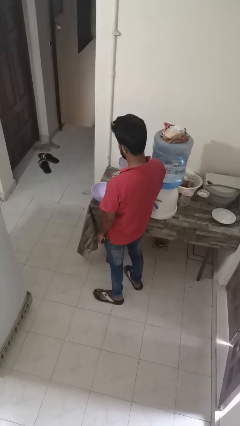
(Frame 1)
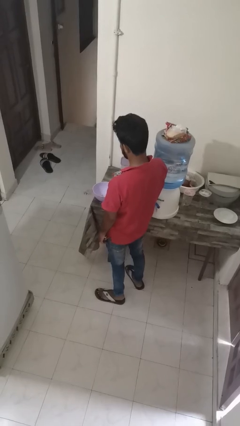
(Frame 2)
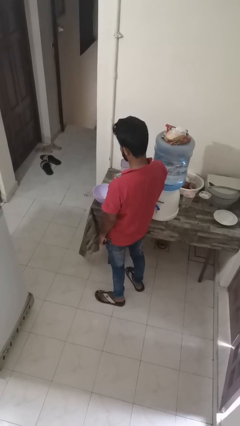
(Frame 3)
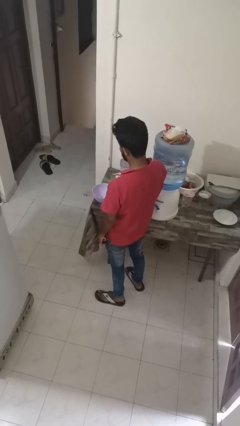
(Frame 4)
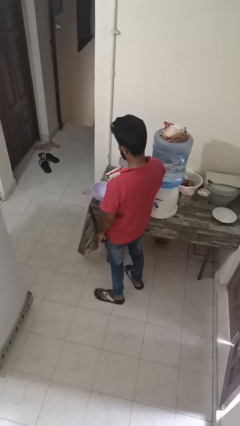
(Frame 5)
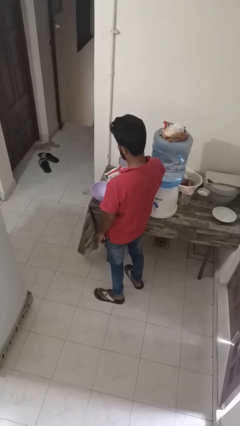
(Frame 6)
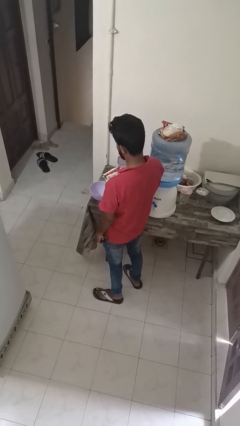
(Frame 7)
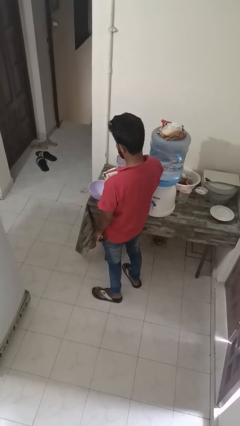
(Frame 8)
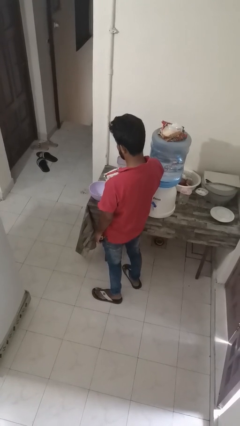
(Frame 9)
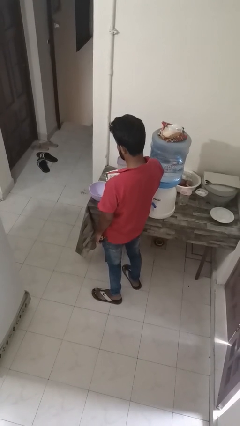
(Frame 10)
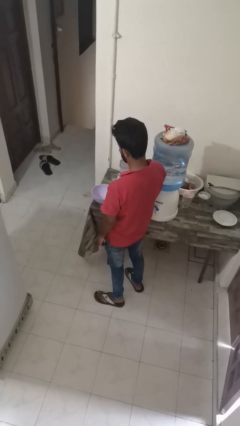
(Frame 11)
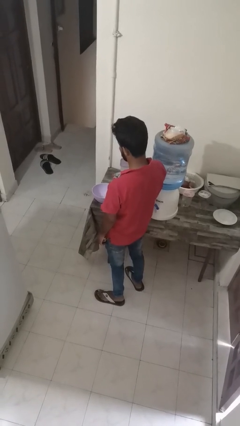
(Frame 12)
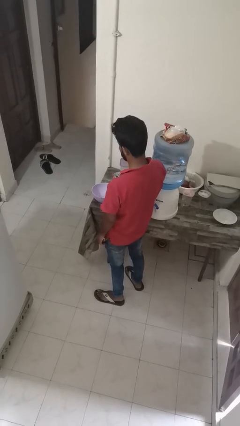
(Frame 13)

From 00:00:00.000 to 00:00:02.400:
person pours into bowl

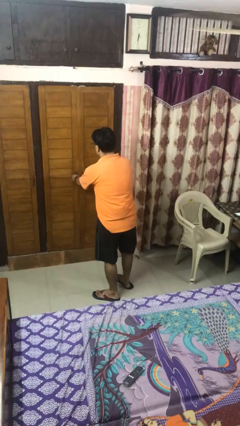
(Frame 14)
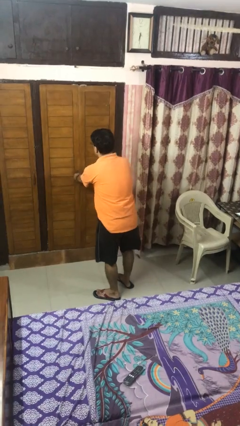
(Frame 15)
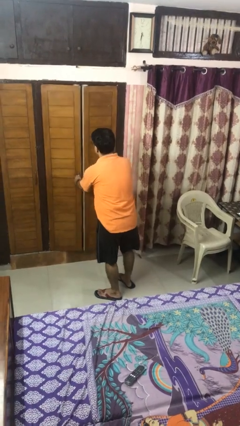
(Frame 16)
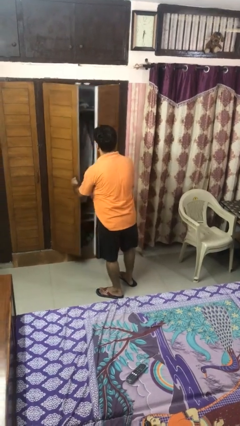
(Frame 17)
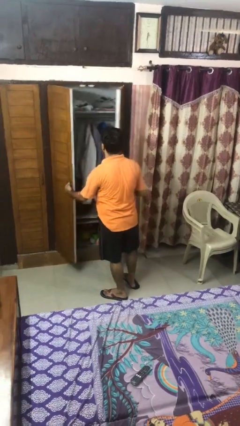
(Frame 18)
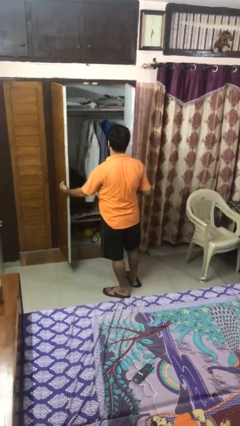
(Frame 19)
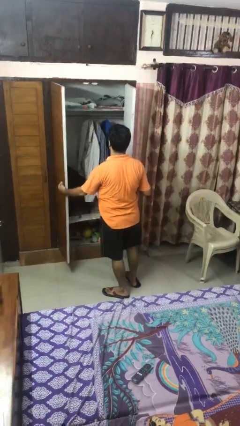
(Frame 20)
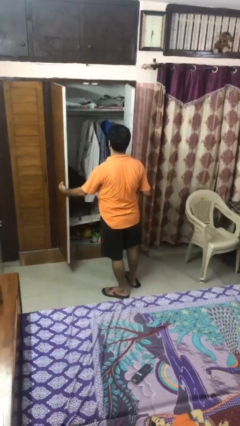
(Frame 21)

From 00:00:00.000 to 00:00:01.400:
person opens closet door

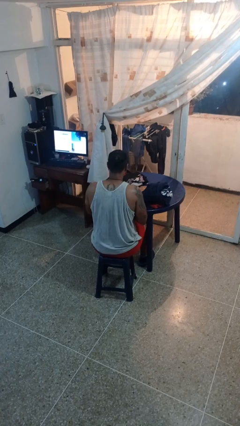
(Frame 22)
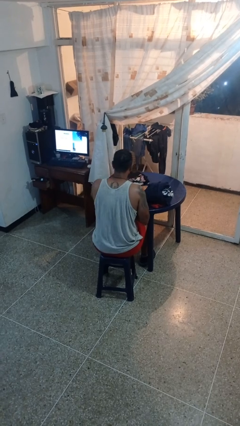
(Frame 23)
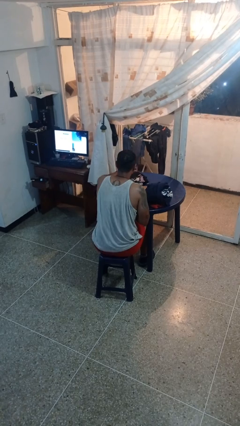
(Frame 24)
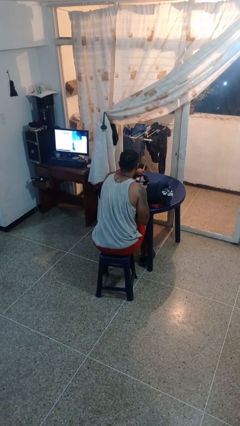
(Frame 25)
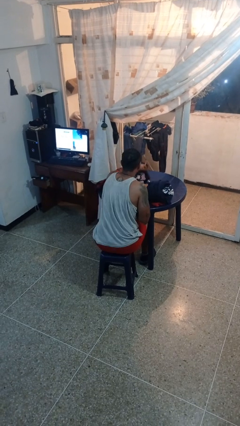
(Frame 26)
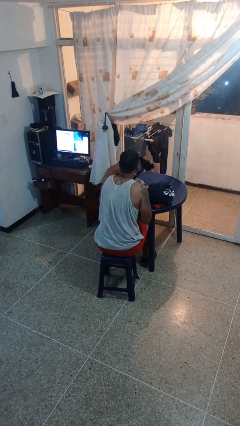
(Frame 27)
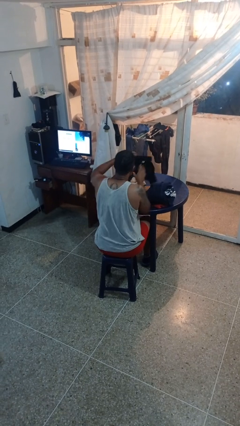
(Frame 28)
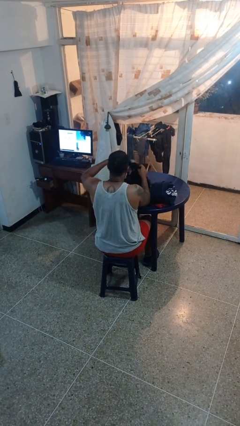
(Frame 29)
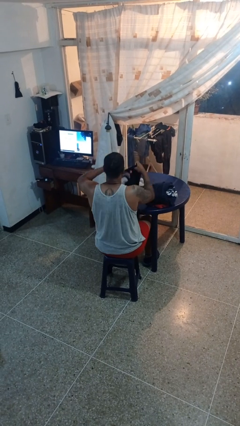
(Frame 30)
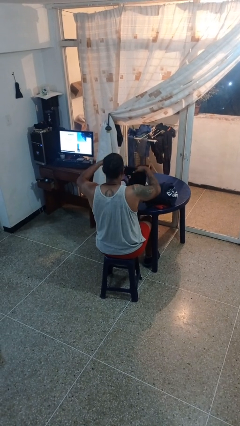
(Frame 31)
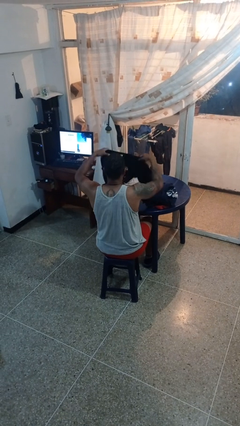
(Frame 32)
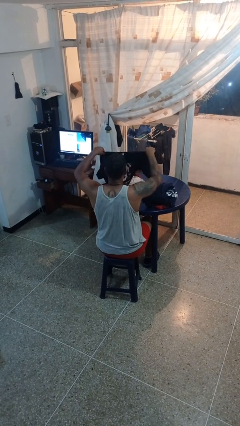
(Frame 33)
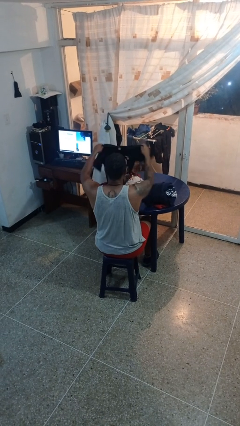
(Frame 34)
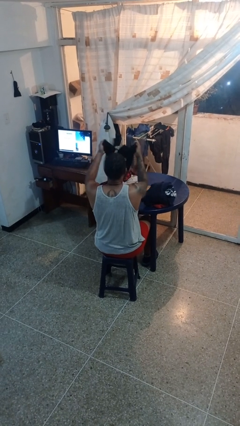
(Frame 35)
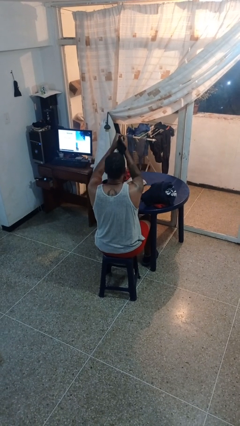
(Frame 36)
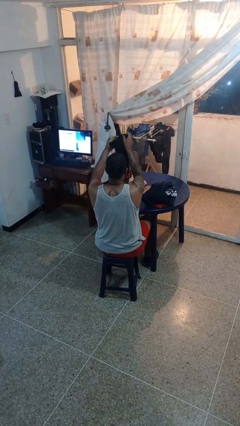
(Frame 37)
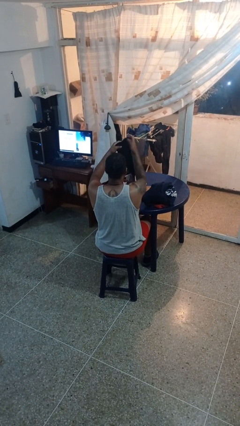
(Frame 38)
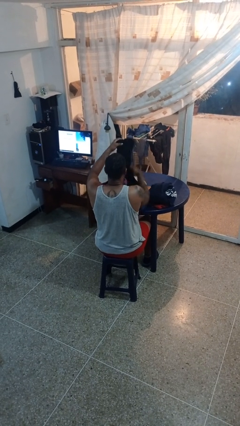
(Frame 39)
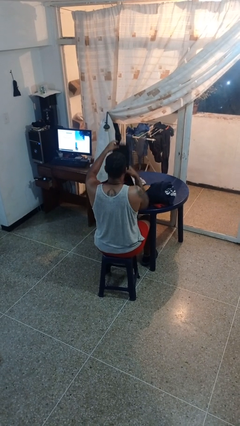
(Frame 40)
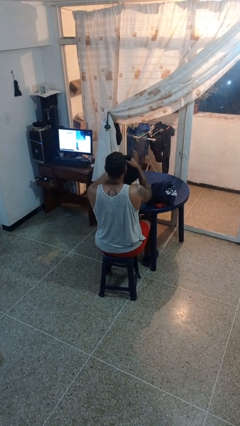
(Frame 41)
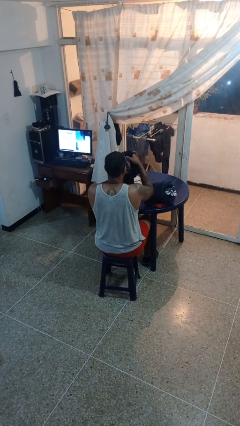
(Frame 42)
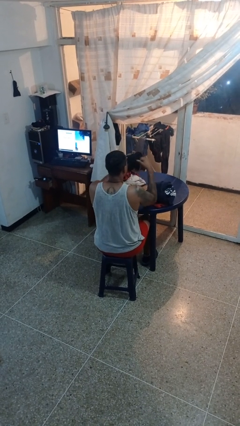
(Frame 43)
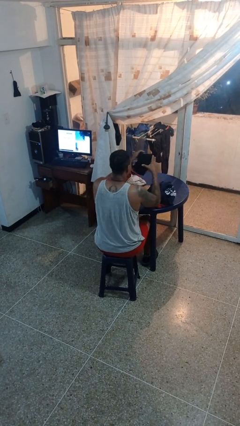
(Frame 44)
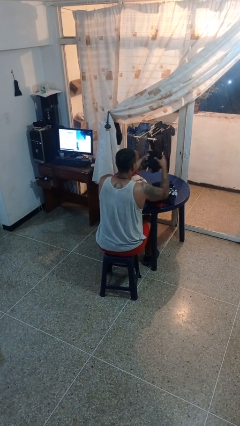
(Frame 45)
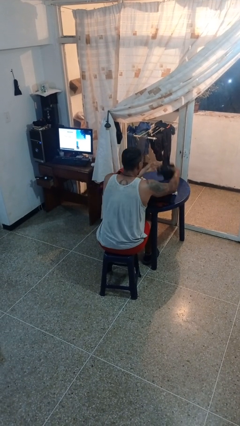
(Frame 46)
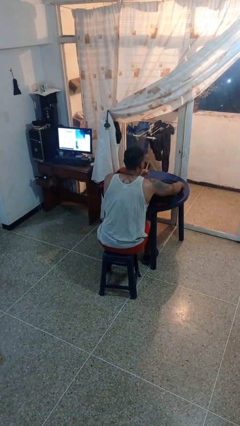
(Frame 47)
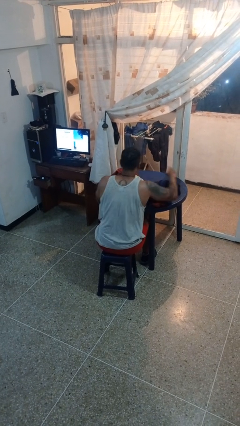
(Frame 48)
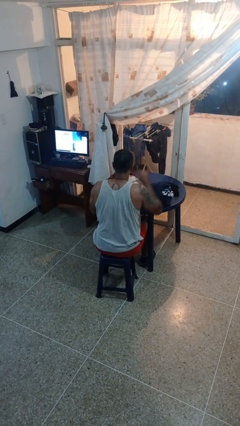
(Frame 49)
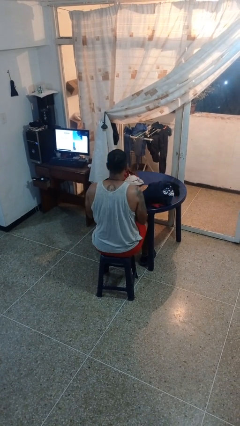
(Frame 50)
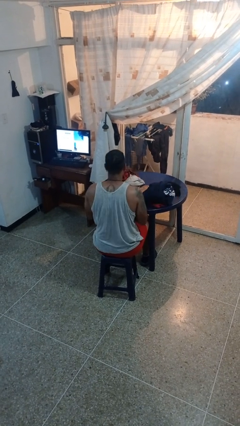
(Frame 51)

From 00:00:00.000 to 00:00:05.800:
person folds shirt

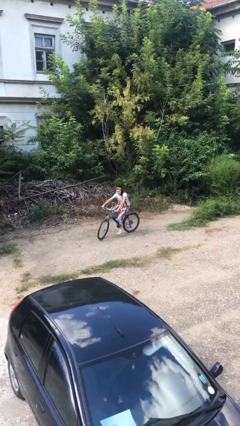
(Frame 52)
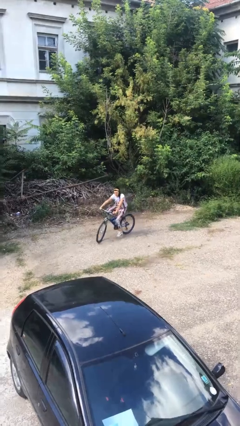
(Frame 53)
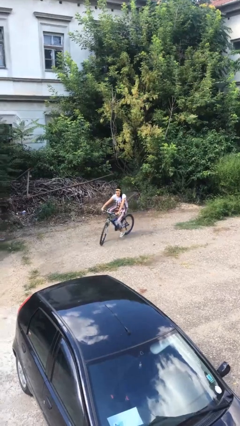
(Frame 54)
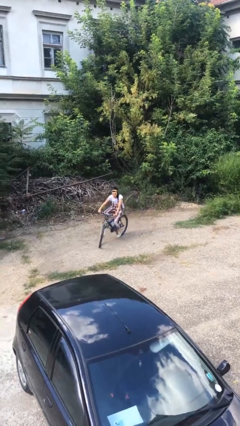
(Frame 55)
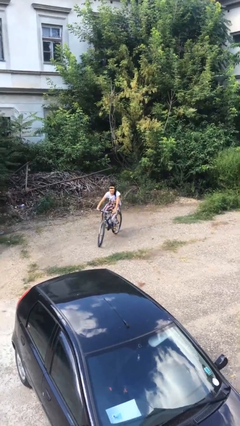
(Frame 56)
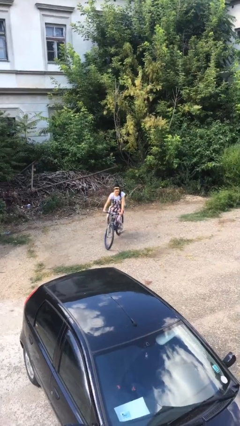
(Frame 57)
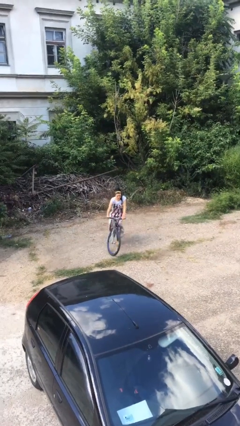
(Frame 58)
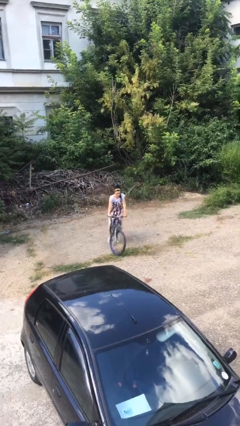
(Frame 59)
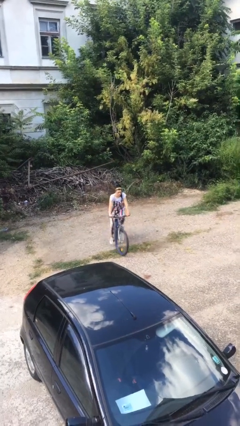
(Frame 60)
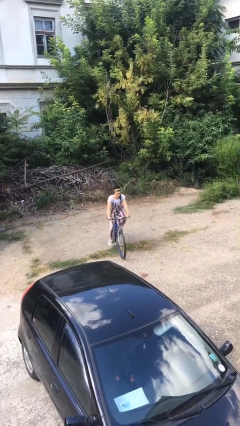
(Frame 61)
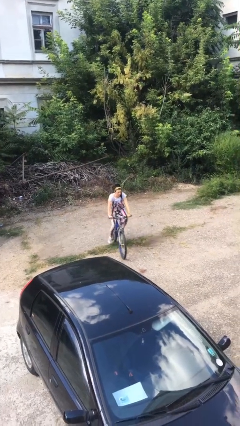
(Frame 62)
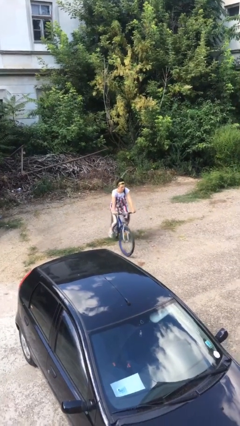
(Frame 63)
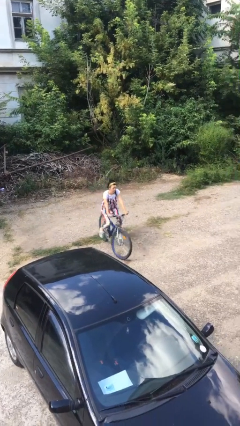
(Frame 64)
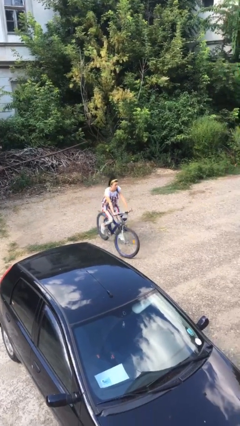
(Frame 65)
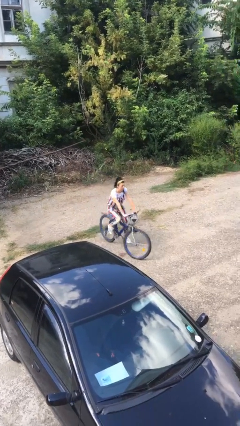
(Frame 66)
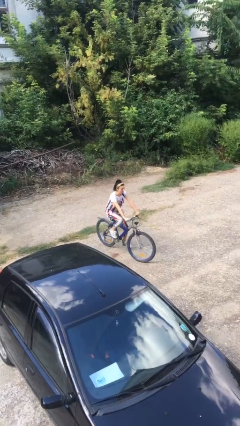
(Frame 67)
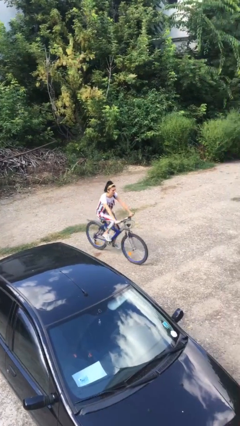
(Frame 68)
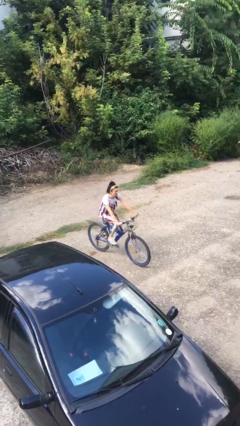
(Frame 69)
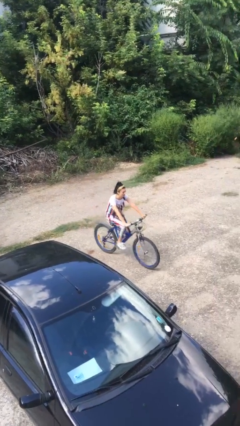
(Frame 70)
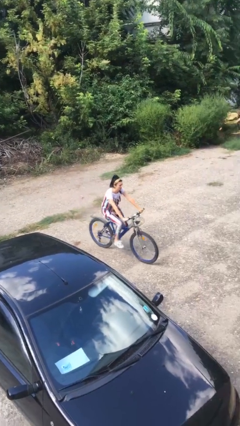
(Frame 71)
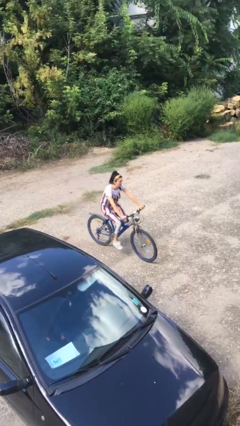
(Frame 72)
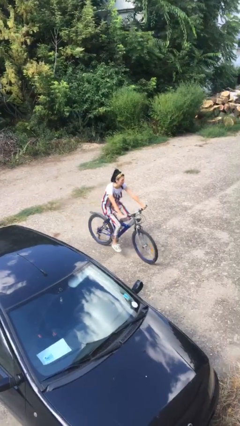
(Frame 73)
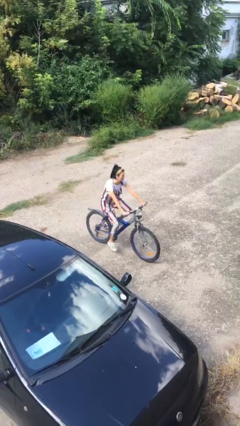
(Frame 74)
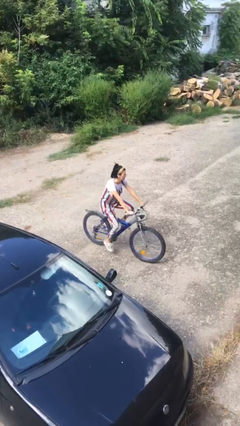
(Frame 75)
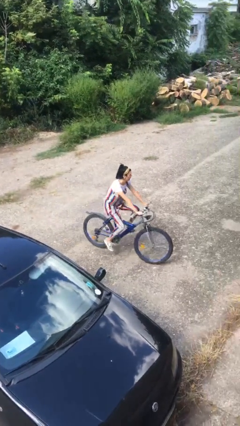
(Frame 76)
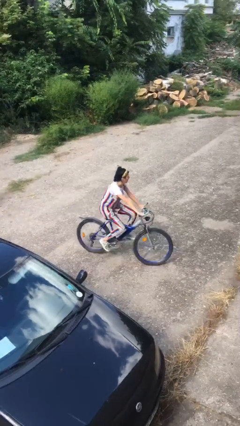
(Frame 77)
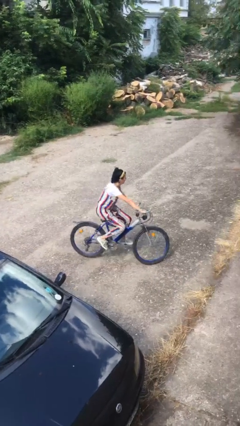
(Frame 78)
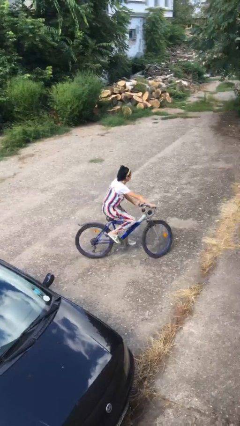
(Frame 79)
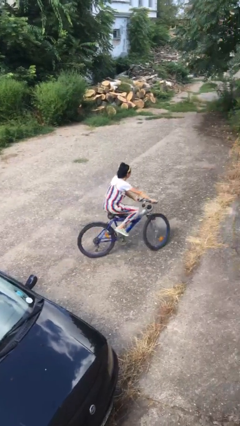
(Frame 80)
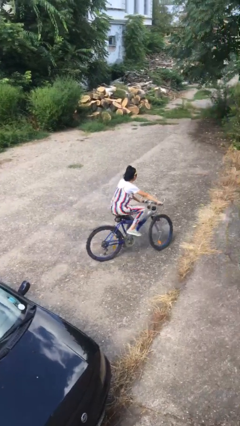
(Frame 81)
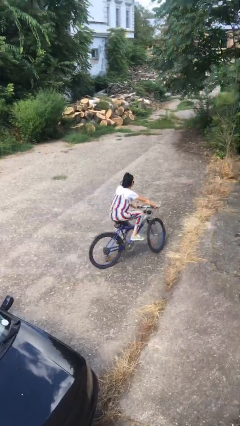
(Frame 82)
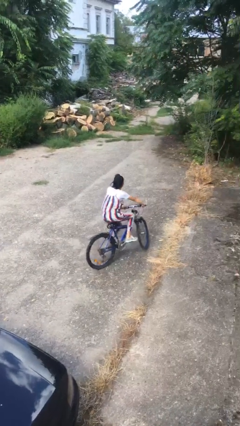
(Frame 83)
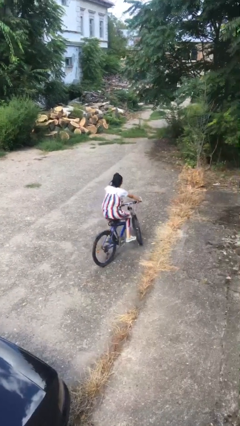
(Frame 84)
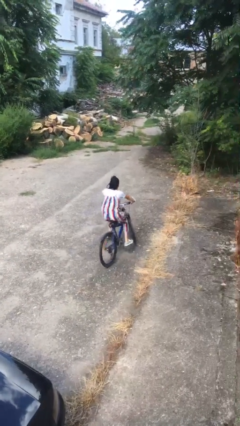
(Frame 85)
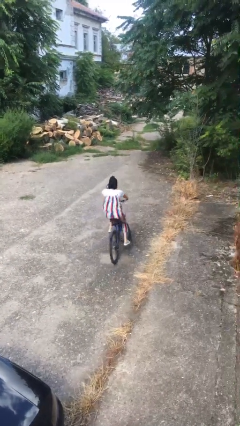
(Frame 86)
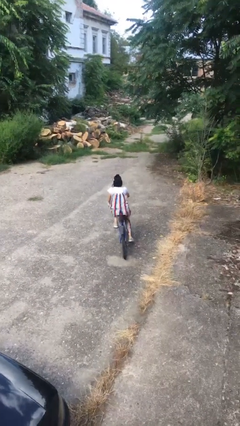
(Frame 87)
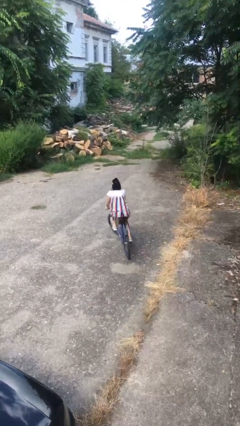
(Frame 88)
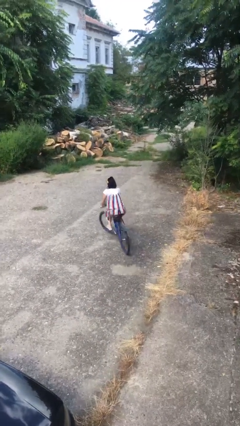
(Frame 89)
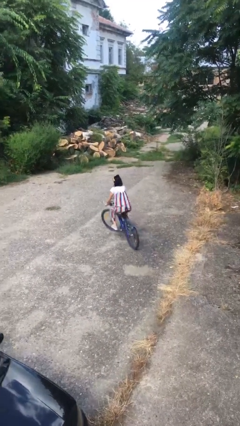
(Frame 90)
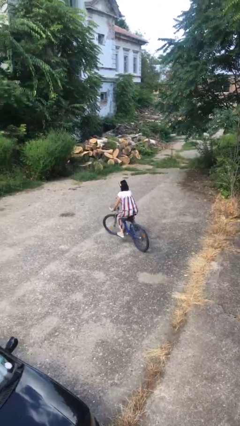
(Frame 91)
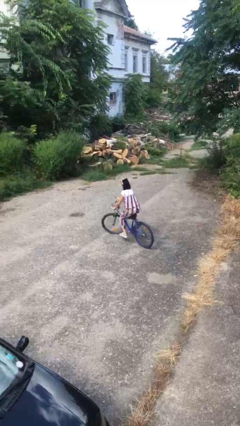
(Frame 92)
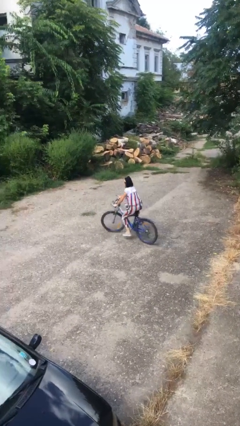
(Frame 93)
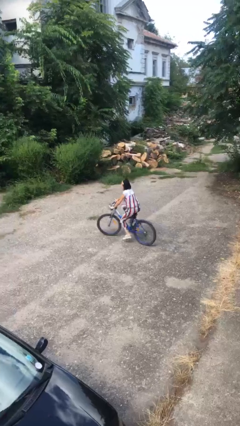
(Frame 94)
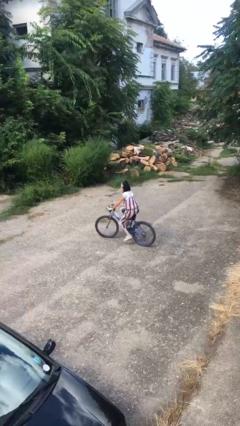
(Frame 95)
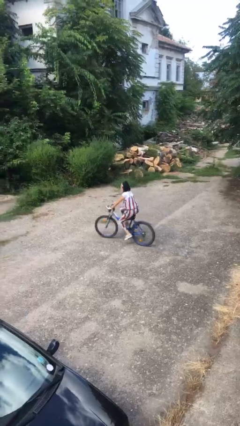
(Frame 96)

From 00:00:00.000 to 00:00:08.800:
person rides bicycle
